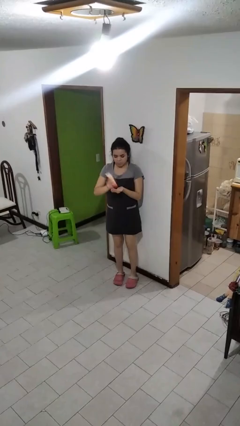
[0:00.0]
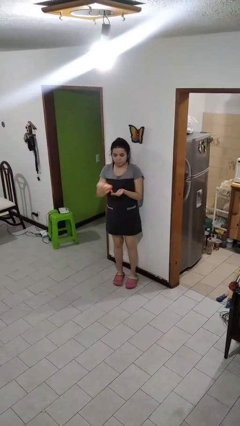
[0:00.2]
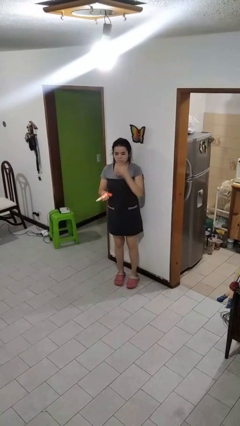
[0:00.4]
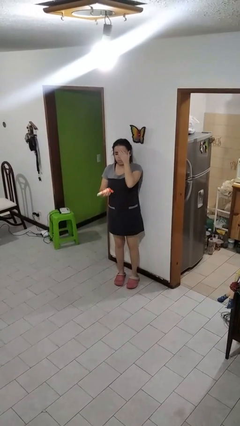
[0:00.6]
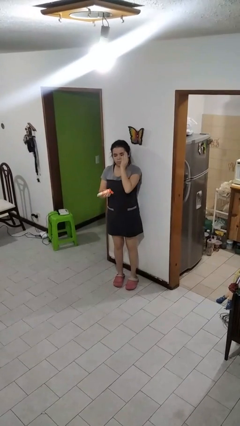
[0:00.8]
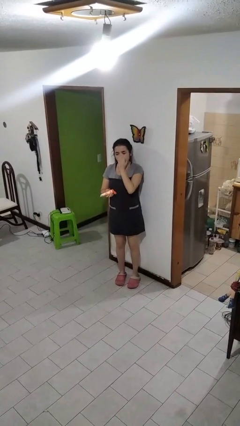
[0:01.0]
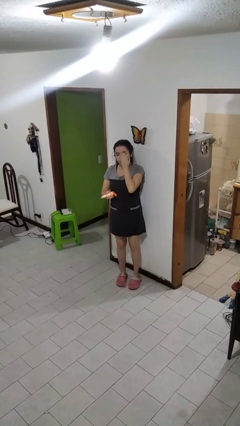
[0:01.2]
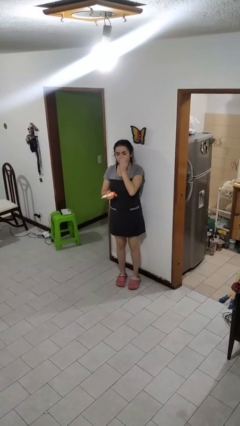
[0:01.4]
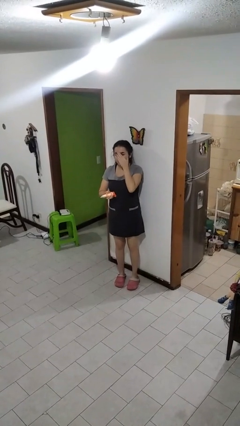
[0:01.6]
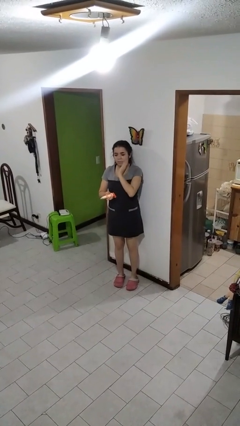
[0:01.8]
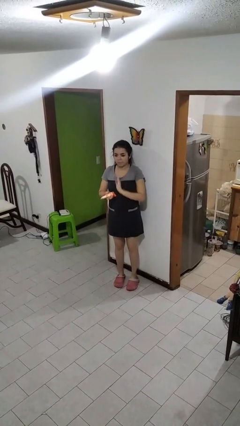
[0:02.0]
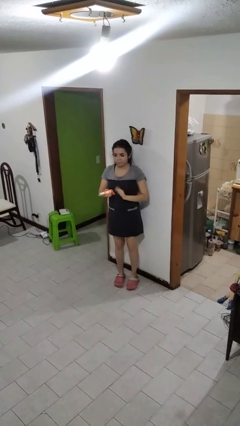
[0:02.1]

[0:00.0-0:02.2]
person applies sunscreen

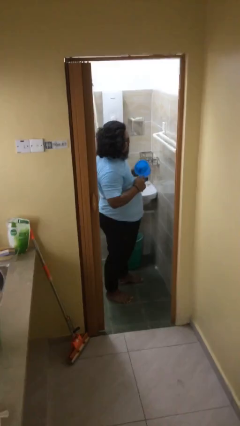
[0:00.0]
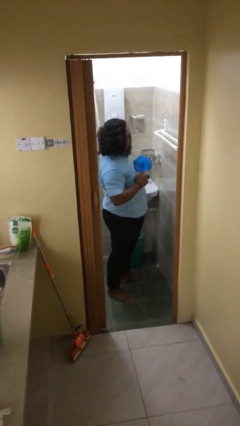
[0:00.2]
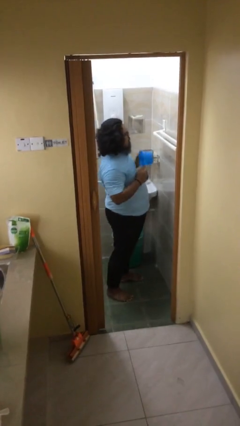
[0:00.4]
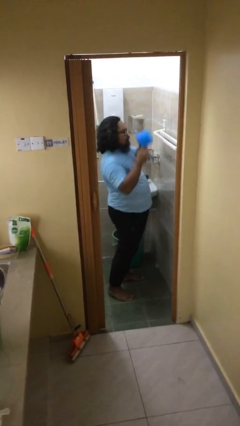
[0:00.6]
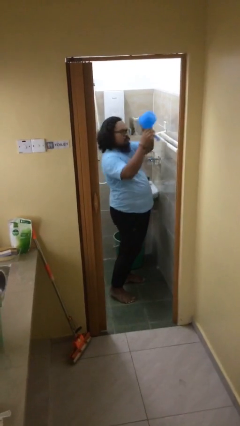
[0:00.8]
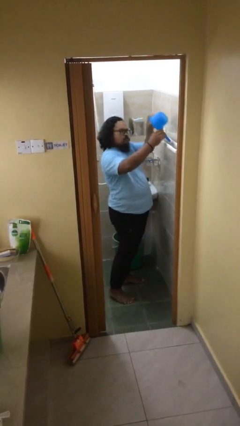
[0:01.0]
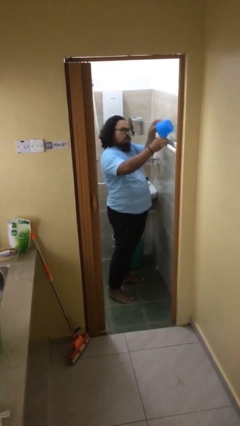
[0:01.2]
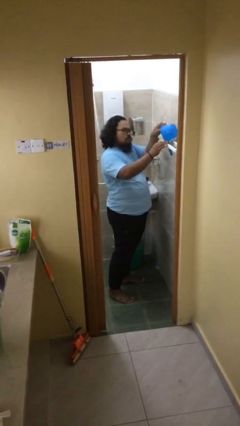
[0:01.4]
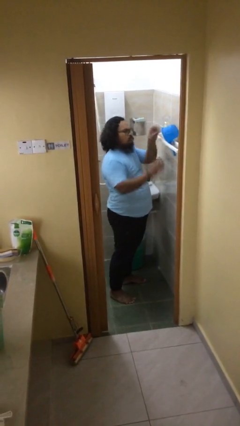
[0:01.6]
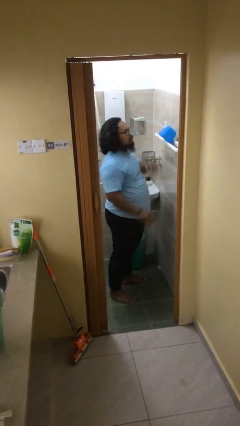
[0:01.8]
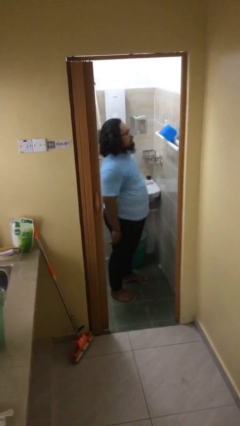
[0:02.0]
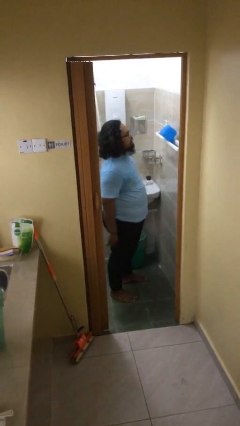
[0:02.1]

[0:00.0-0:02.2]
person puts down object on countertop

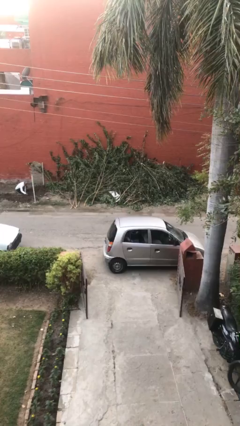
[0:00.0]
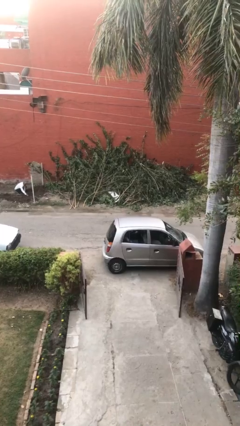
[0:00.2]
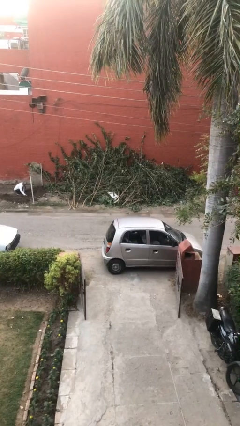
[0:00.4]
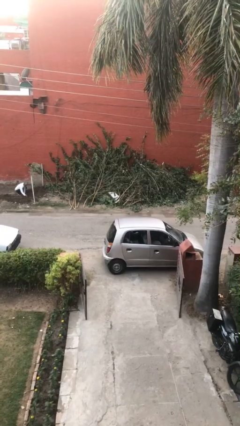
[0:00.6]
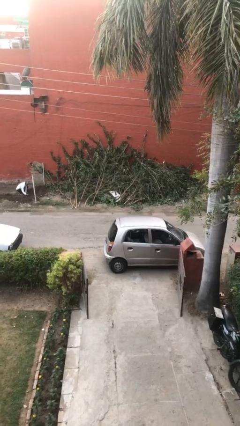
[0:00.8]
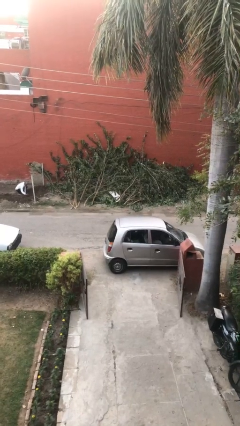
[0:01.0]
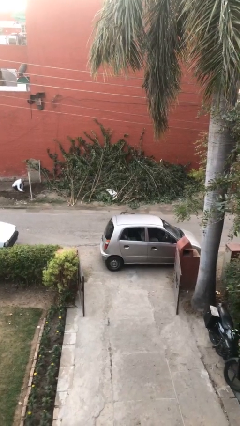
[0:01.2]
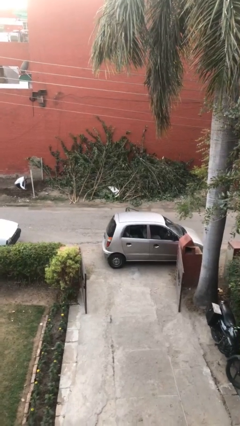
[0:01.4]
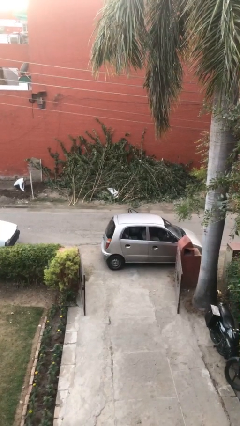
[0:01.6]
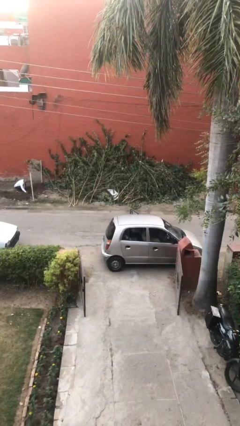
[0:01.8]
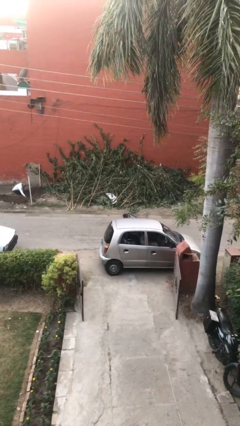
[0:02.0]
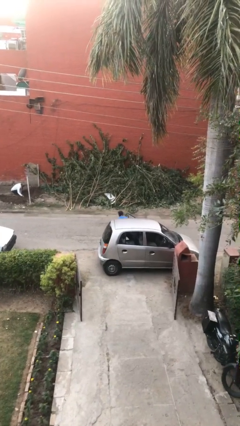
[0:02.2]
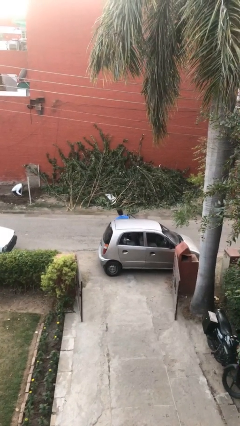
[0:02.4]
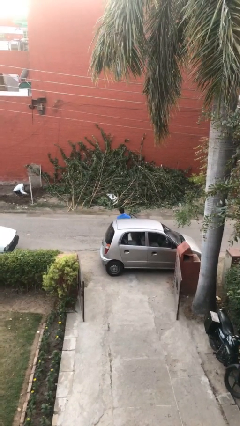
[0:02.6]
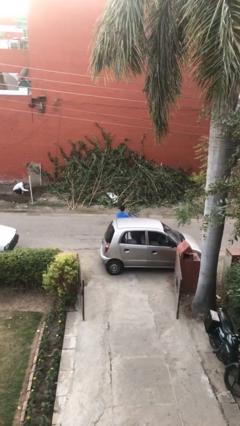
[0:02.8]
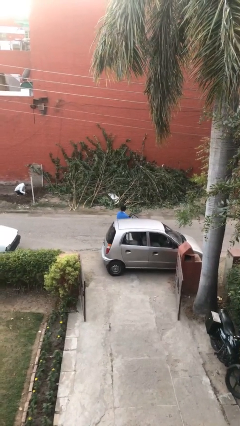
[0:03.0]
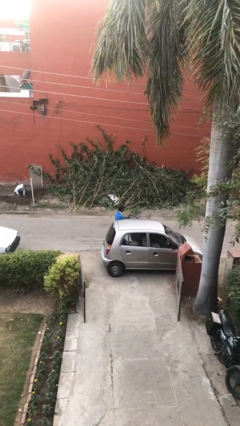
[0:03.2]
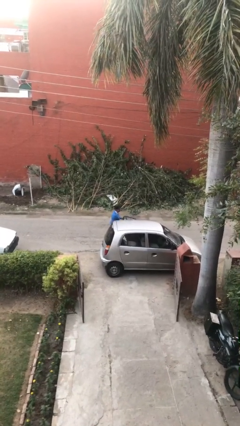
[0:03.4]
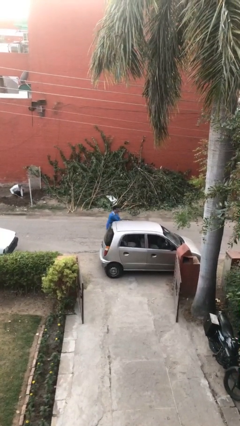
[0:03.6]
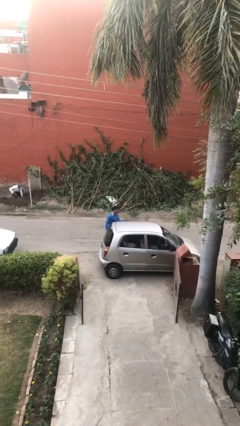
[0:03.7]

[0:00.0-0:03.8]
person exits car

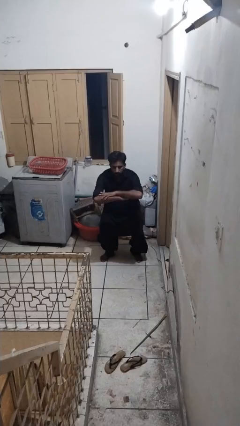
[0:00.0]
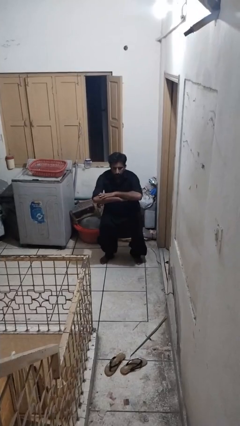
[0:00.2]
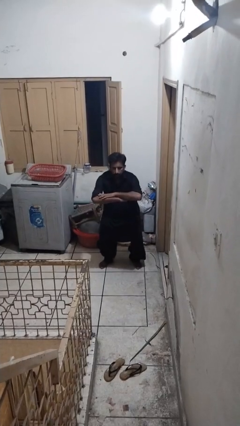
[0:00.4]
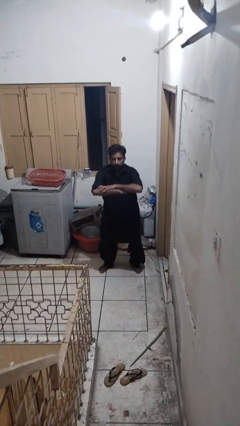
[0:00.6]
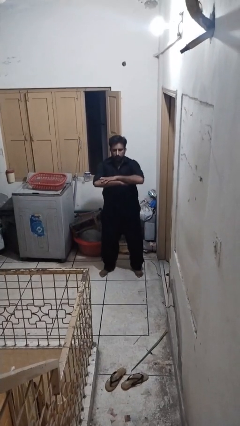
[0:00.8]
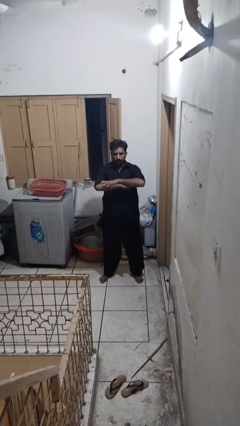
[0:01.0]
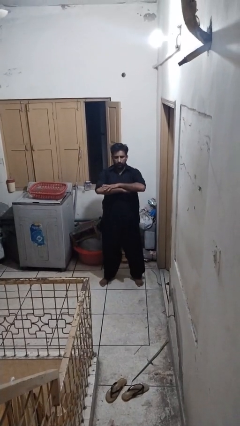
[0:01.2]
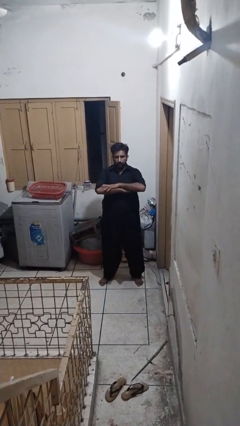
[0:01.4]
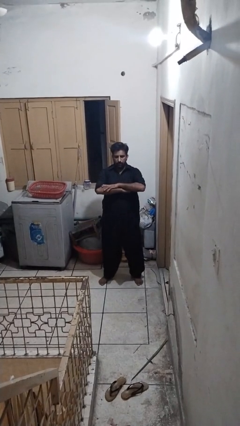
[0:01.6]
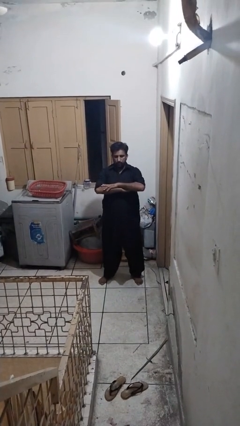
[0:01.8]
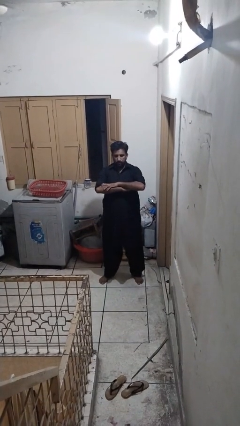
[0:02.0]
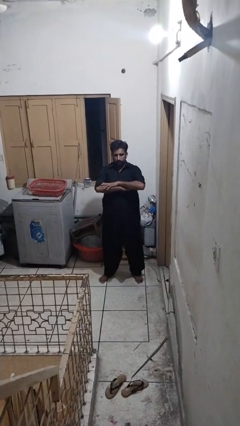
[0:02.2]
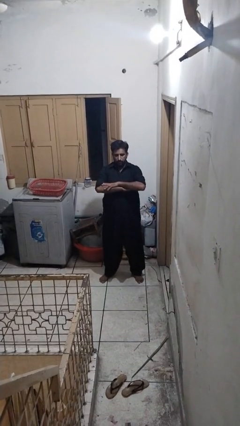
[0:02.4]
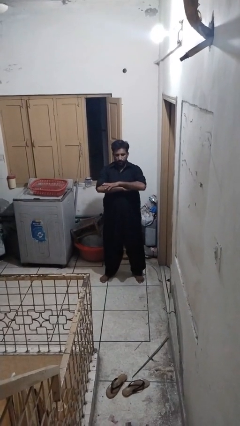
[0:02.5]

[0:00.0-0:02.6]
person stands up

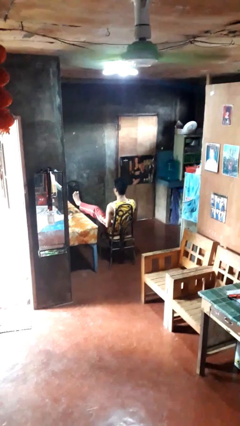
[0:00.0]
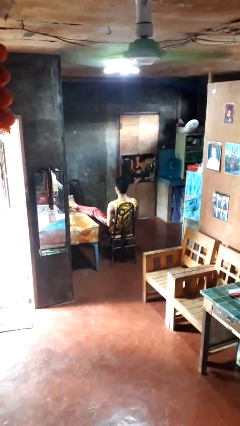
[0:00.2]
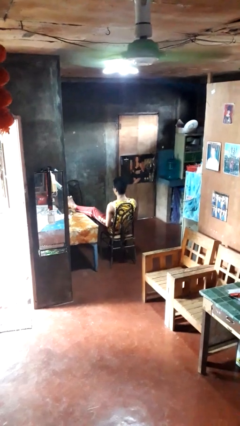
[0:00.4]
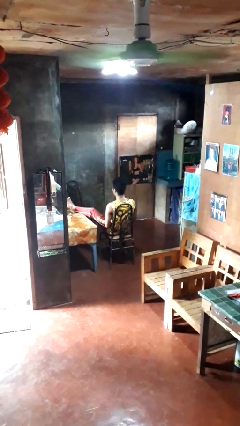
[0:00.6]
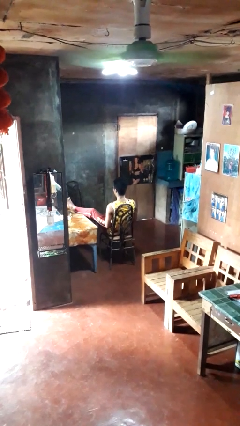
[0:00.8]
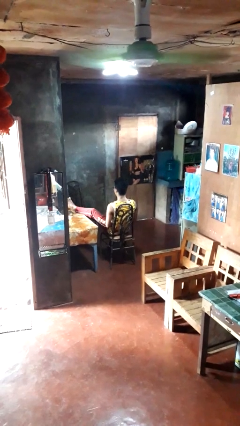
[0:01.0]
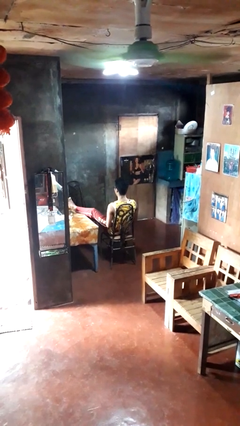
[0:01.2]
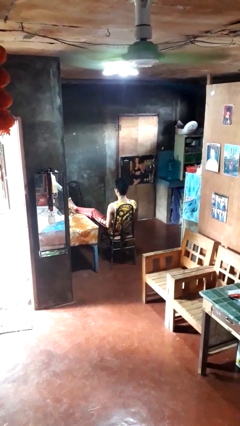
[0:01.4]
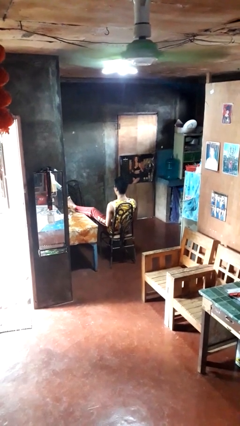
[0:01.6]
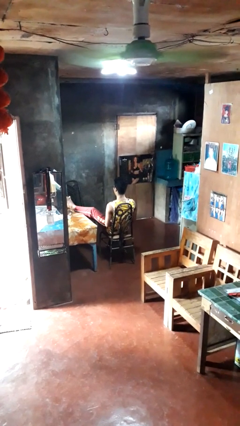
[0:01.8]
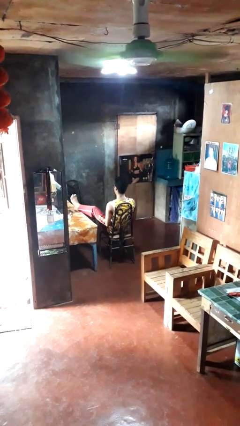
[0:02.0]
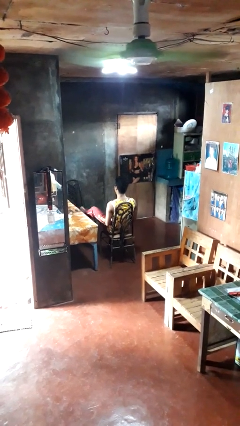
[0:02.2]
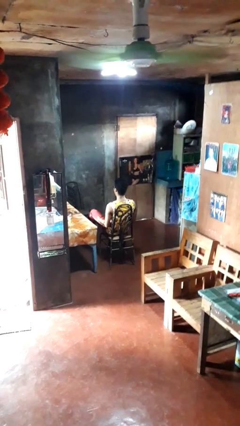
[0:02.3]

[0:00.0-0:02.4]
person puts feet up

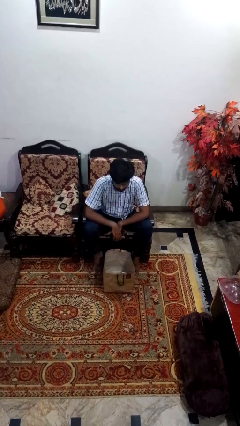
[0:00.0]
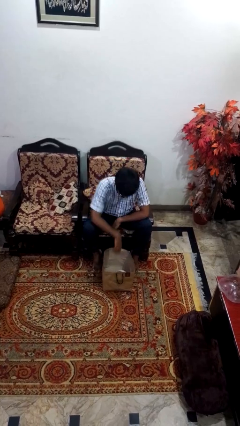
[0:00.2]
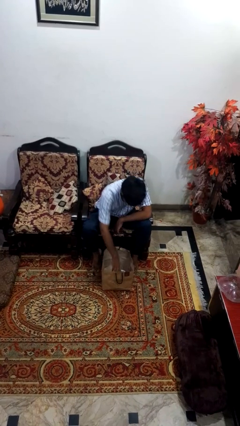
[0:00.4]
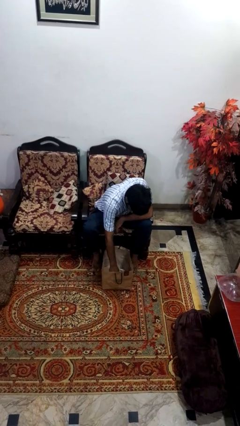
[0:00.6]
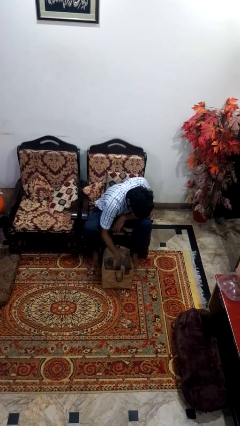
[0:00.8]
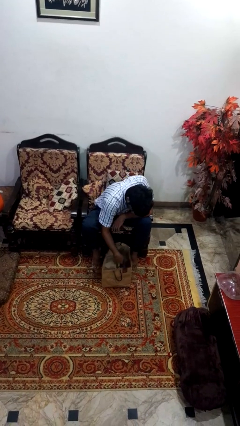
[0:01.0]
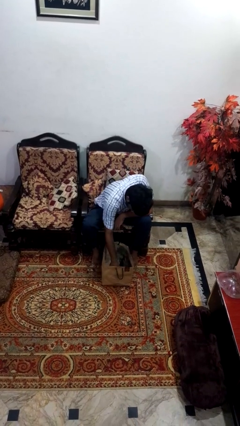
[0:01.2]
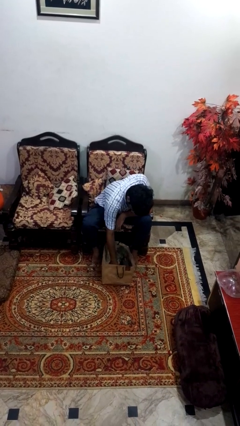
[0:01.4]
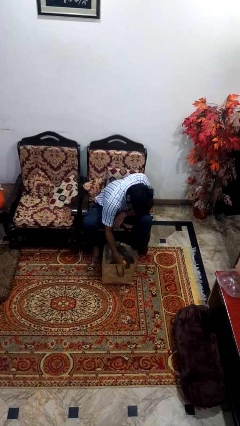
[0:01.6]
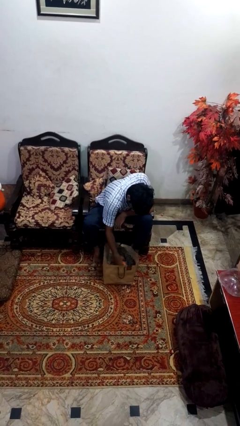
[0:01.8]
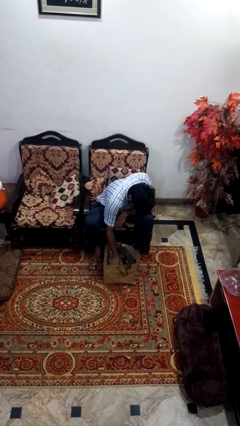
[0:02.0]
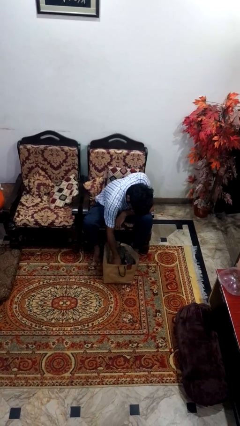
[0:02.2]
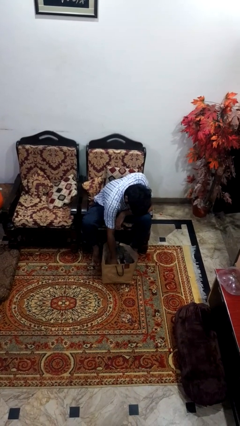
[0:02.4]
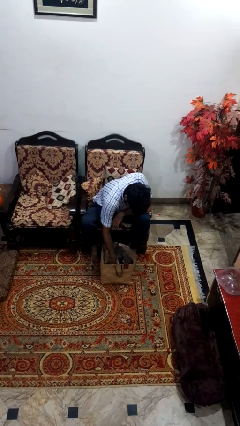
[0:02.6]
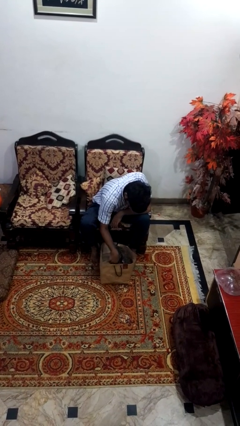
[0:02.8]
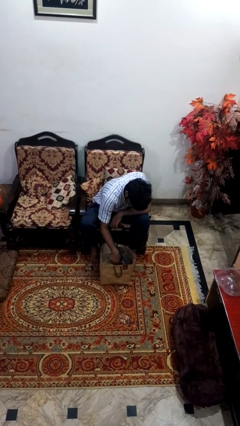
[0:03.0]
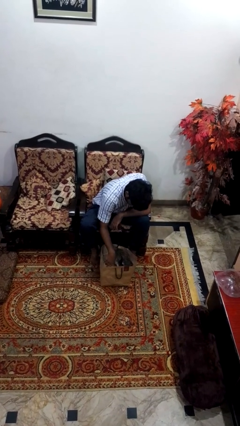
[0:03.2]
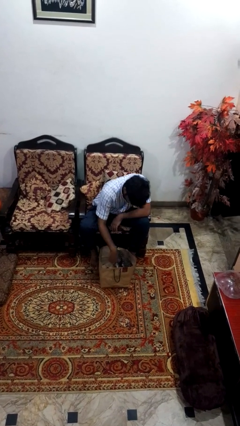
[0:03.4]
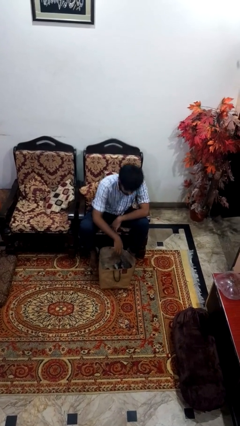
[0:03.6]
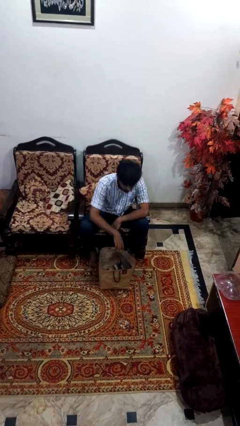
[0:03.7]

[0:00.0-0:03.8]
person searches in bag

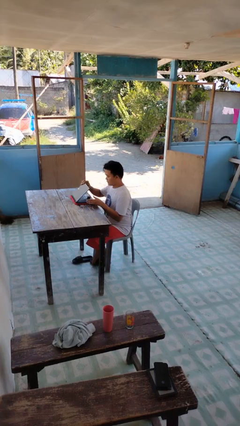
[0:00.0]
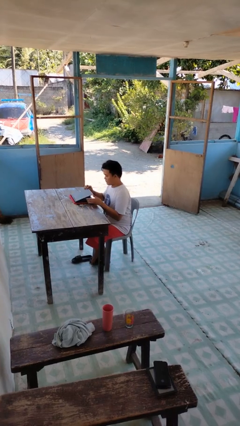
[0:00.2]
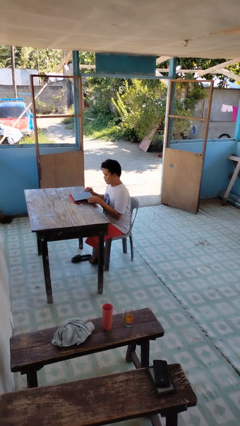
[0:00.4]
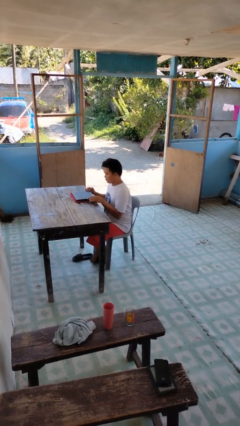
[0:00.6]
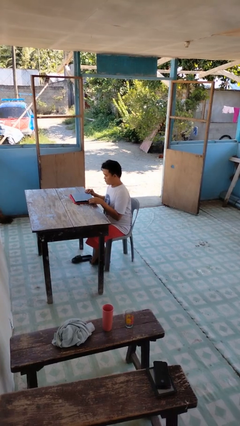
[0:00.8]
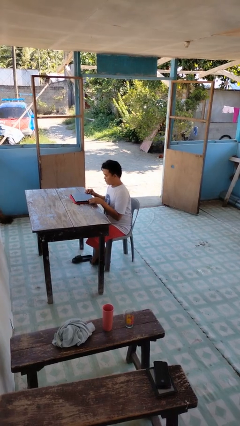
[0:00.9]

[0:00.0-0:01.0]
person closes laptop
